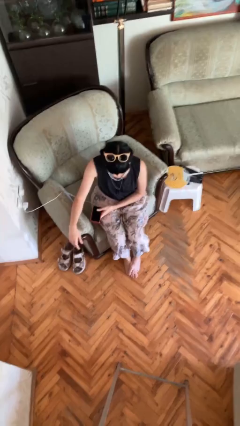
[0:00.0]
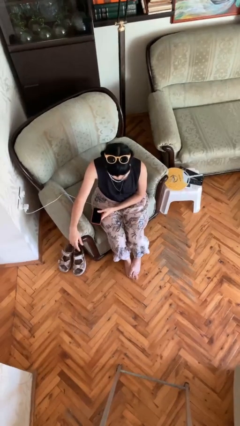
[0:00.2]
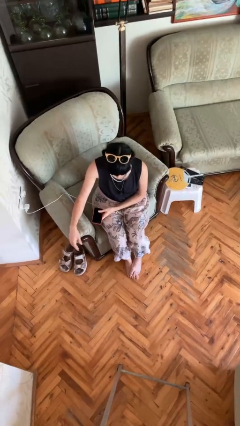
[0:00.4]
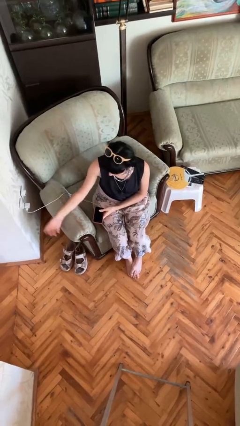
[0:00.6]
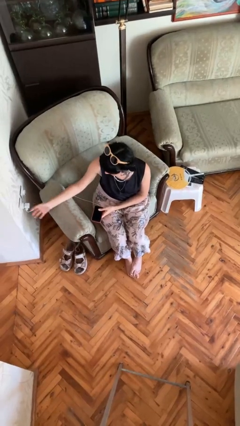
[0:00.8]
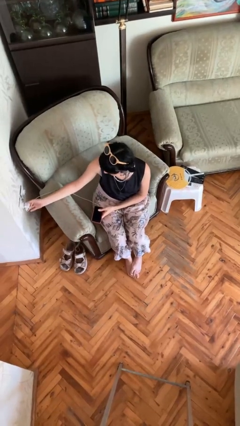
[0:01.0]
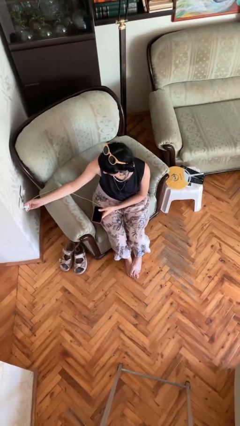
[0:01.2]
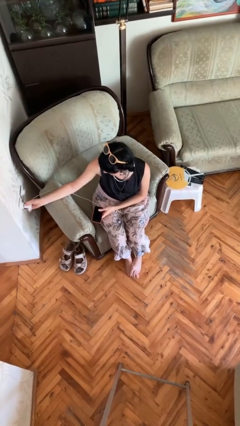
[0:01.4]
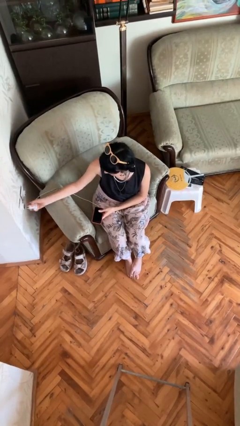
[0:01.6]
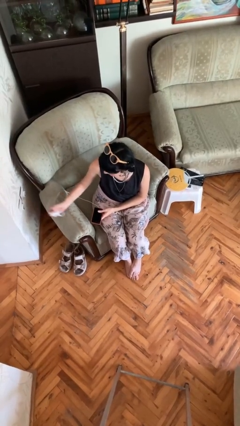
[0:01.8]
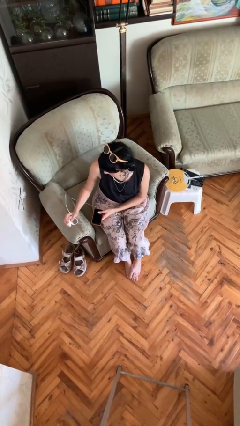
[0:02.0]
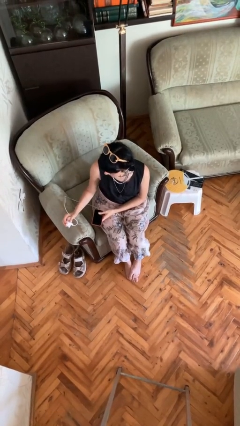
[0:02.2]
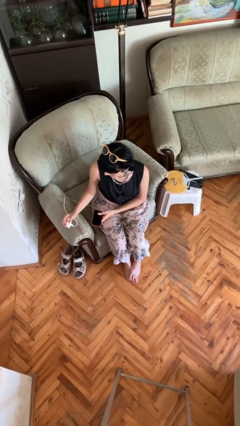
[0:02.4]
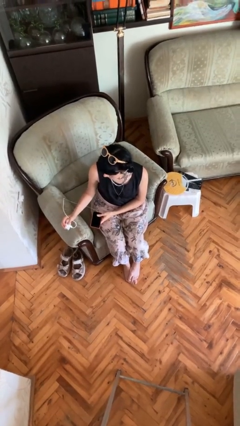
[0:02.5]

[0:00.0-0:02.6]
person unplugs from electrical socket

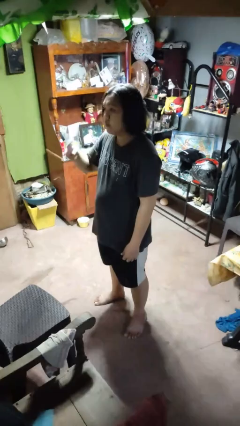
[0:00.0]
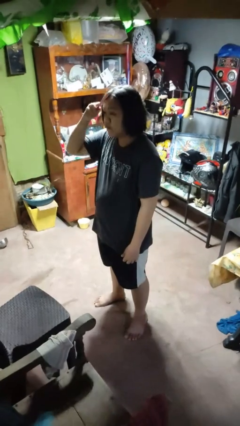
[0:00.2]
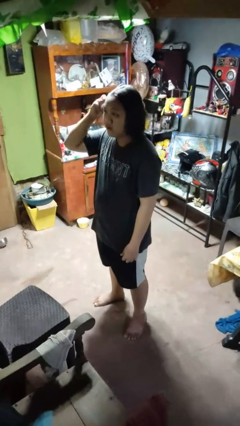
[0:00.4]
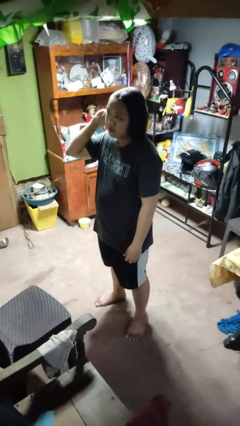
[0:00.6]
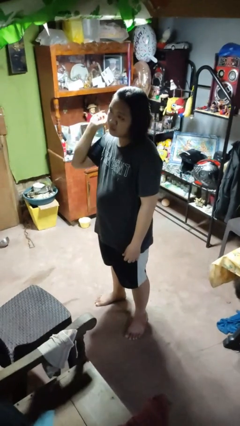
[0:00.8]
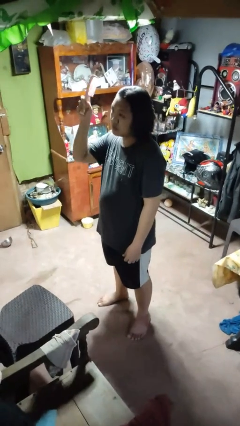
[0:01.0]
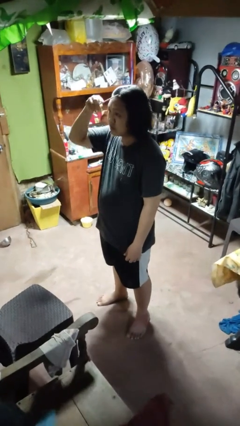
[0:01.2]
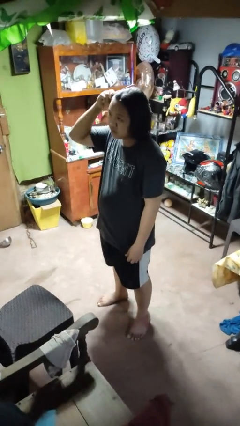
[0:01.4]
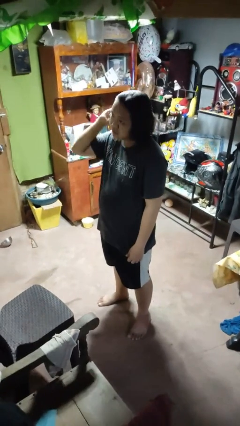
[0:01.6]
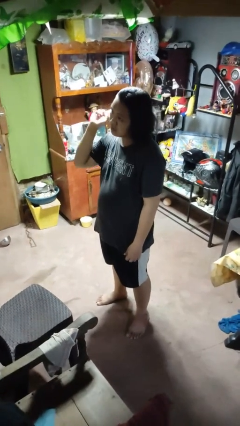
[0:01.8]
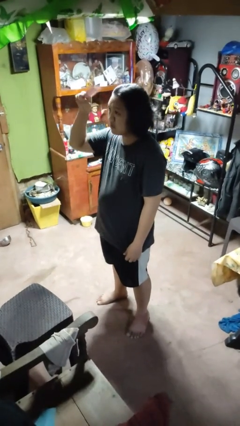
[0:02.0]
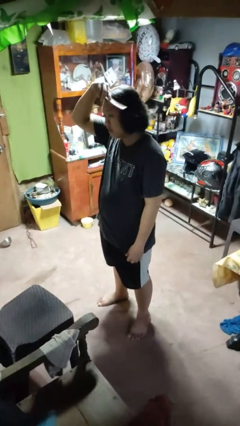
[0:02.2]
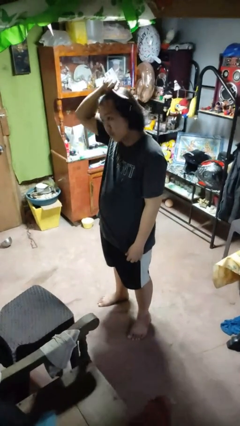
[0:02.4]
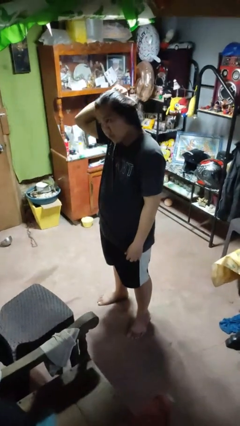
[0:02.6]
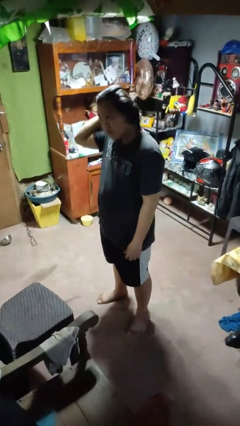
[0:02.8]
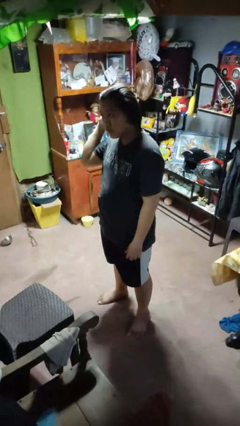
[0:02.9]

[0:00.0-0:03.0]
person brushes hair

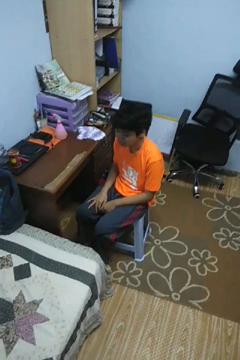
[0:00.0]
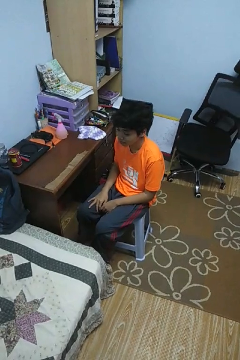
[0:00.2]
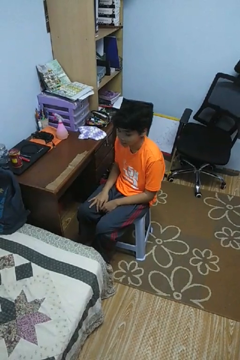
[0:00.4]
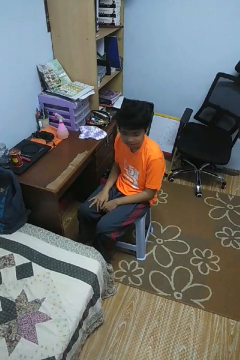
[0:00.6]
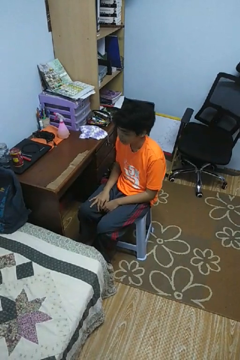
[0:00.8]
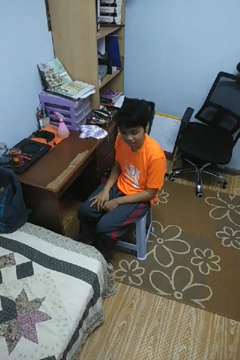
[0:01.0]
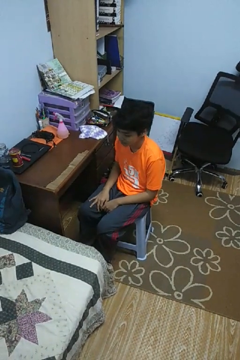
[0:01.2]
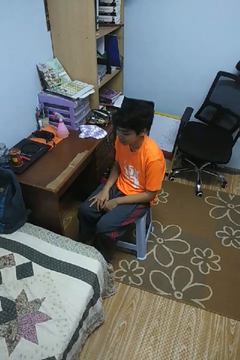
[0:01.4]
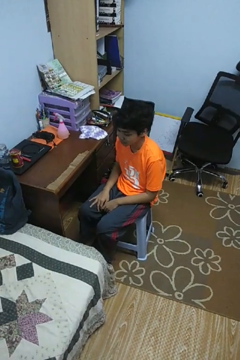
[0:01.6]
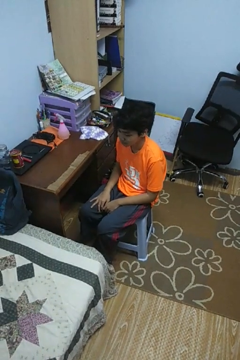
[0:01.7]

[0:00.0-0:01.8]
person shakes head

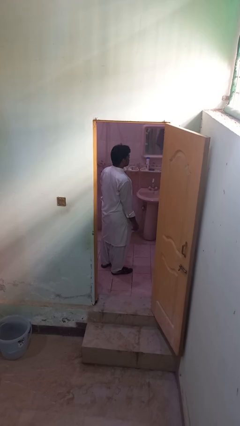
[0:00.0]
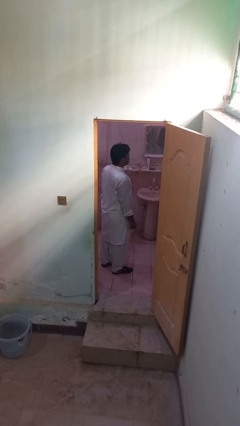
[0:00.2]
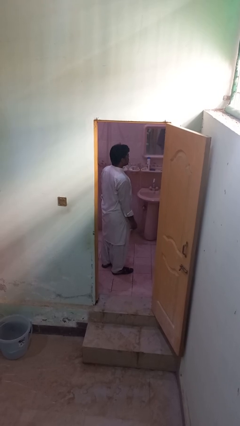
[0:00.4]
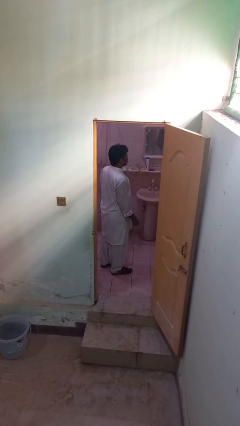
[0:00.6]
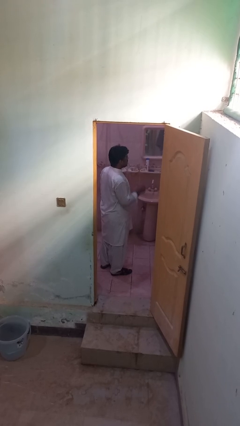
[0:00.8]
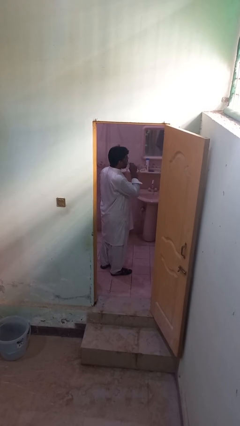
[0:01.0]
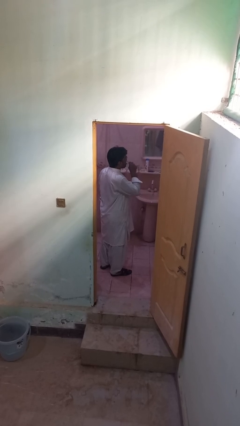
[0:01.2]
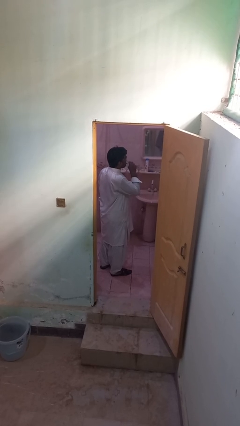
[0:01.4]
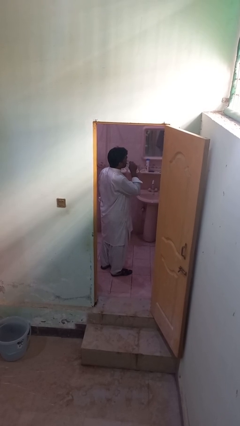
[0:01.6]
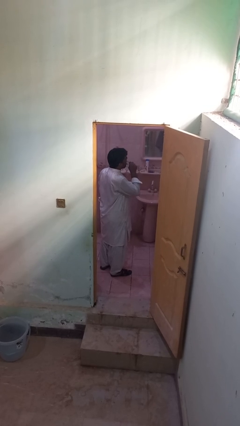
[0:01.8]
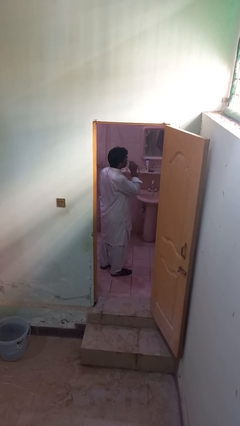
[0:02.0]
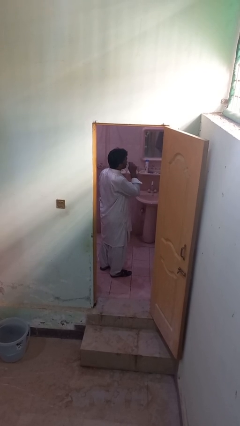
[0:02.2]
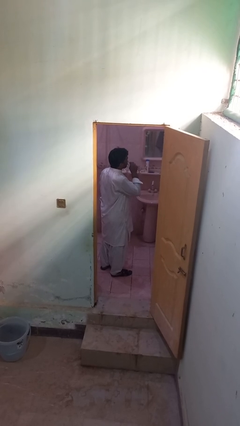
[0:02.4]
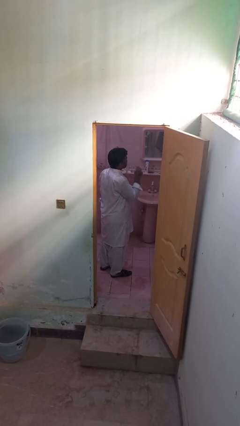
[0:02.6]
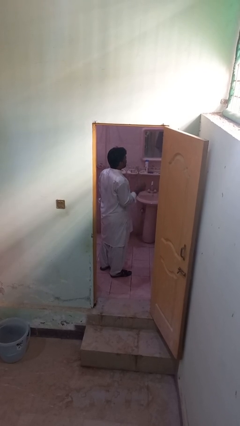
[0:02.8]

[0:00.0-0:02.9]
person flosses

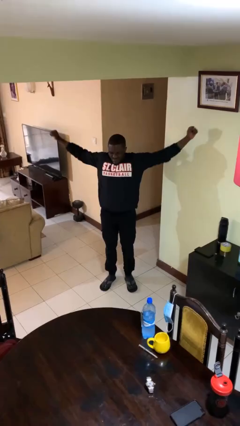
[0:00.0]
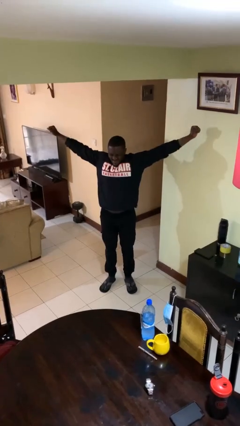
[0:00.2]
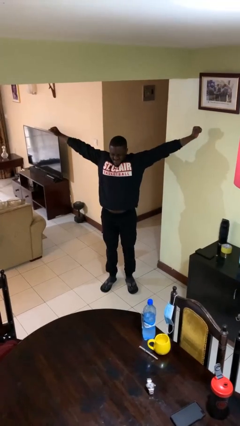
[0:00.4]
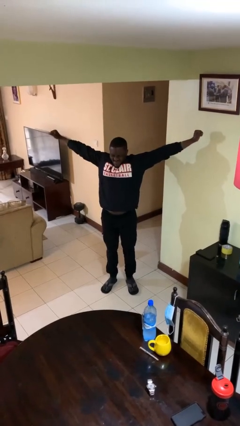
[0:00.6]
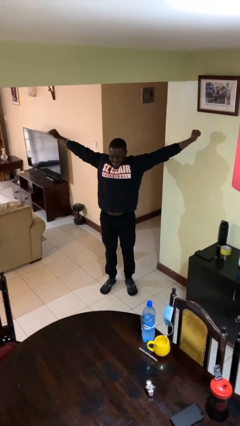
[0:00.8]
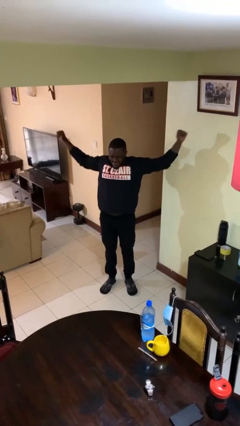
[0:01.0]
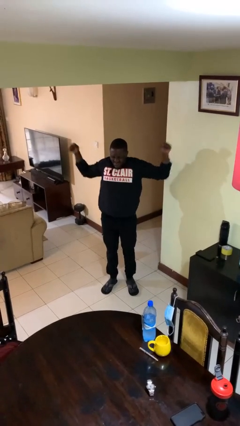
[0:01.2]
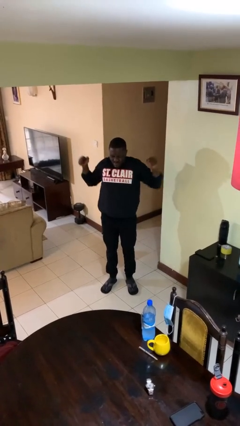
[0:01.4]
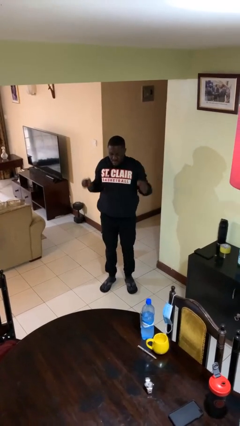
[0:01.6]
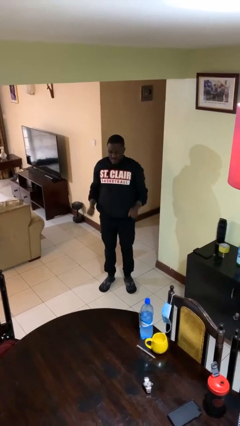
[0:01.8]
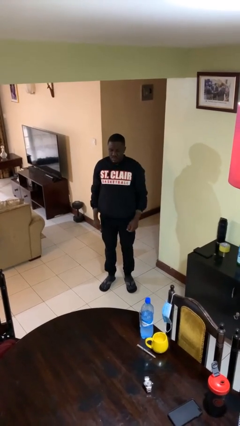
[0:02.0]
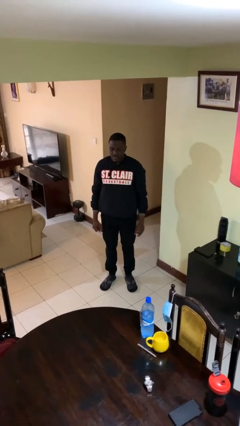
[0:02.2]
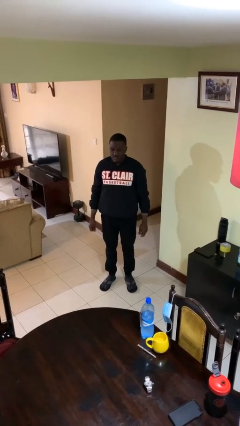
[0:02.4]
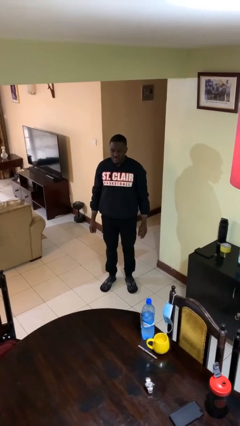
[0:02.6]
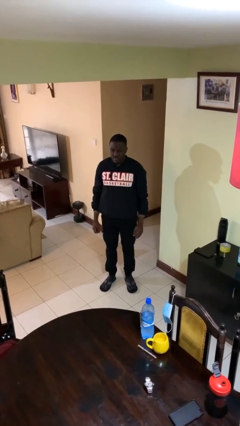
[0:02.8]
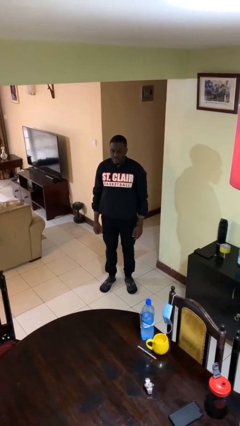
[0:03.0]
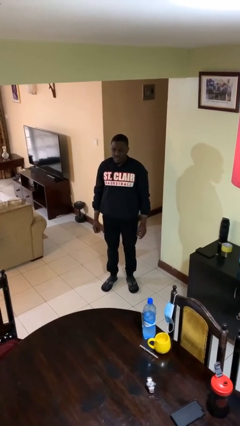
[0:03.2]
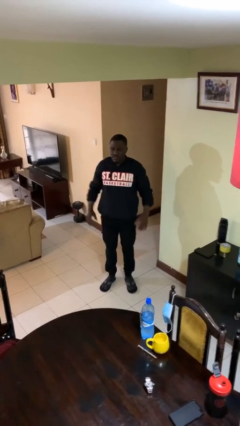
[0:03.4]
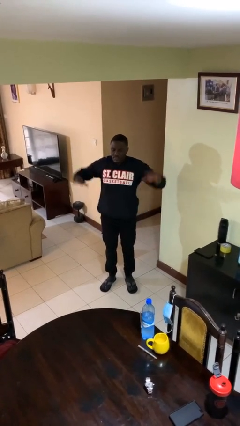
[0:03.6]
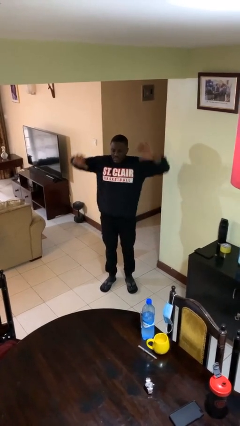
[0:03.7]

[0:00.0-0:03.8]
person stretches arms to side

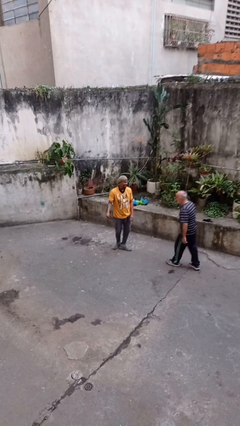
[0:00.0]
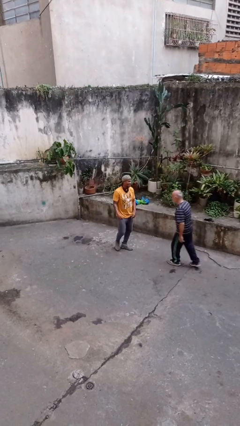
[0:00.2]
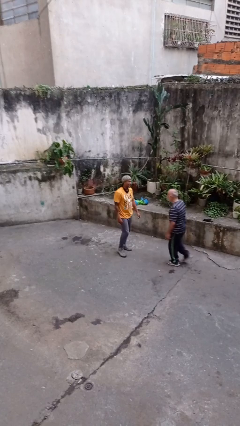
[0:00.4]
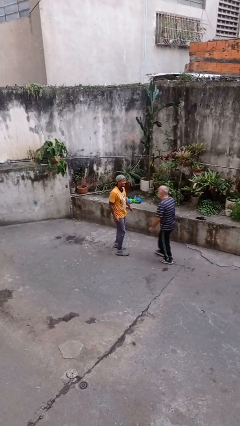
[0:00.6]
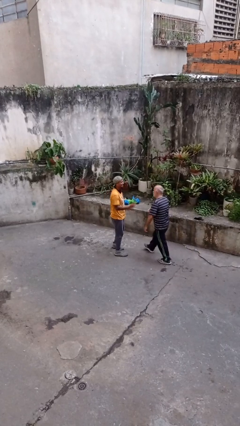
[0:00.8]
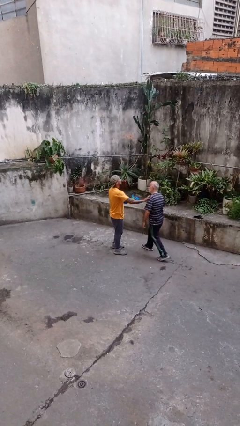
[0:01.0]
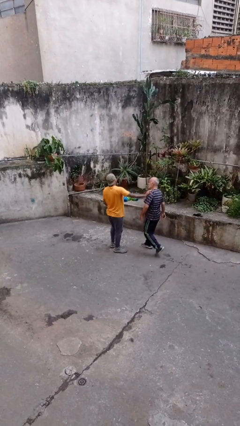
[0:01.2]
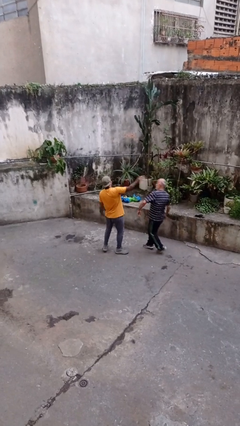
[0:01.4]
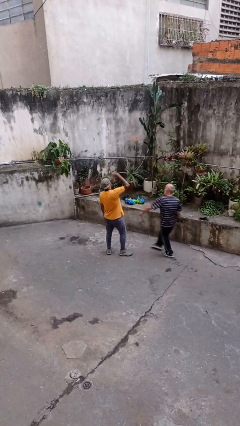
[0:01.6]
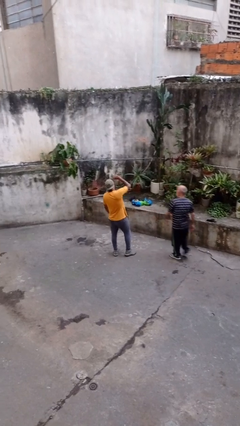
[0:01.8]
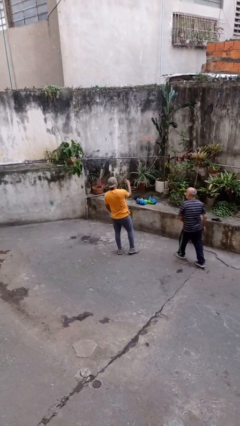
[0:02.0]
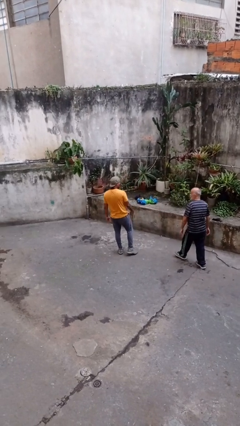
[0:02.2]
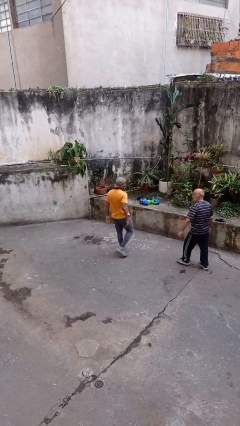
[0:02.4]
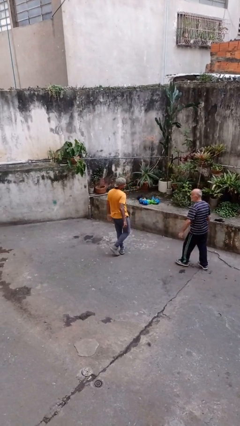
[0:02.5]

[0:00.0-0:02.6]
person shoves person

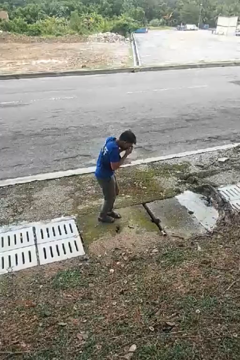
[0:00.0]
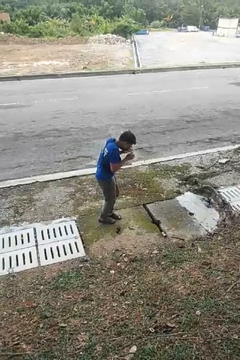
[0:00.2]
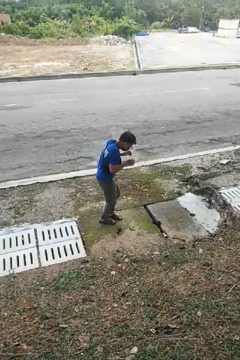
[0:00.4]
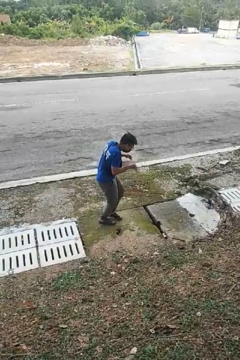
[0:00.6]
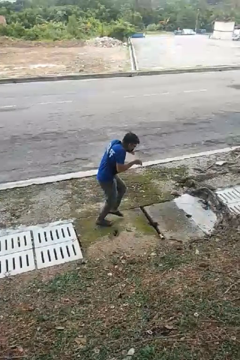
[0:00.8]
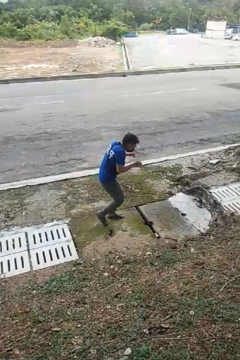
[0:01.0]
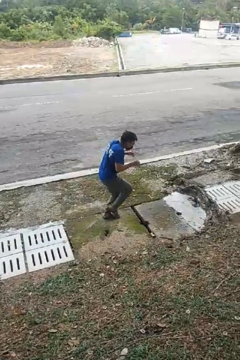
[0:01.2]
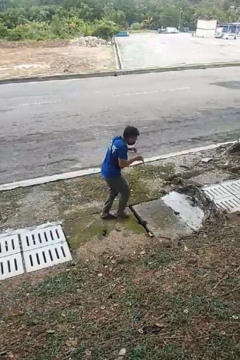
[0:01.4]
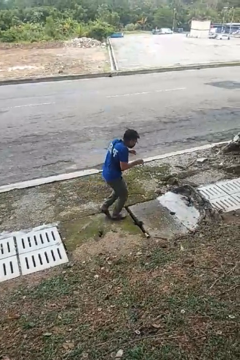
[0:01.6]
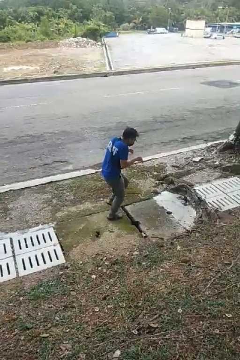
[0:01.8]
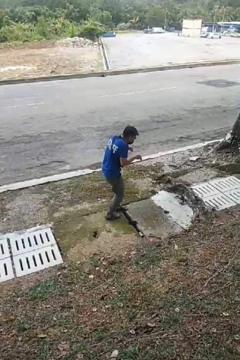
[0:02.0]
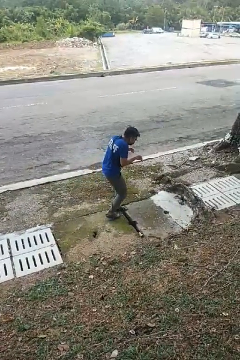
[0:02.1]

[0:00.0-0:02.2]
person walks tiptoe
